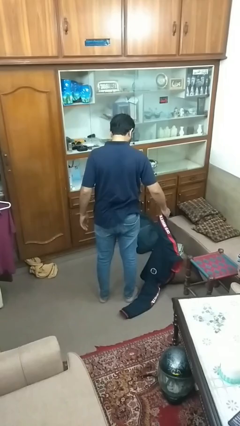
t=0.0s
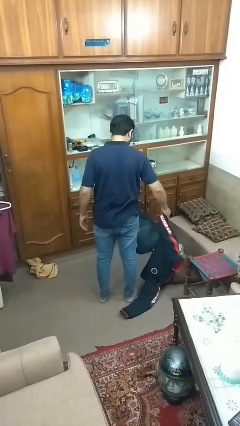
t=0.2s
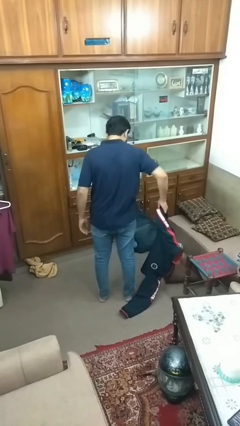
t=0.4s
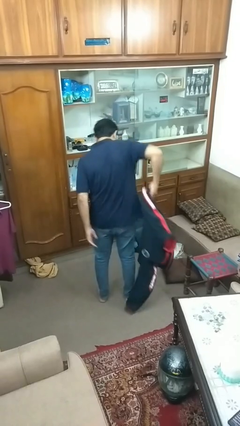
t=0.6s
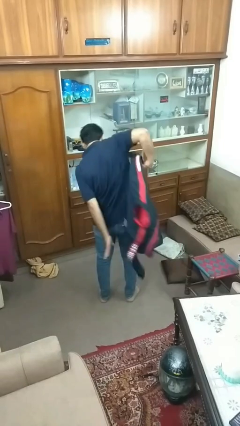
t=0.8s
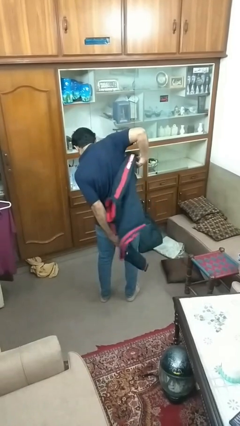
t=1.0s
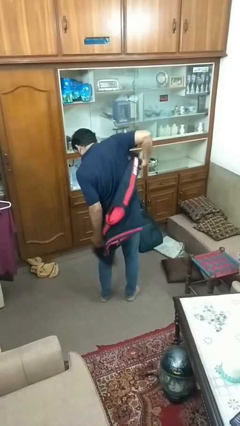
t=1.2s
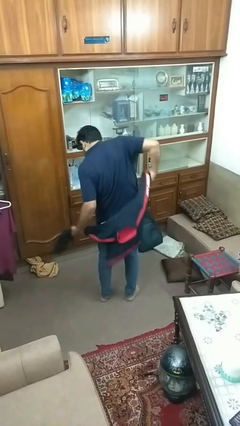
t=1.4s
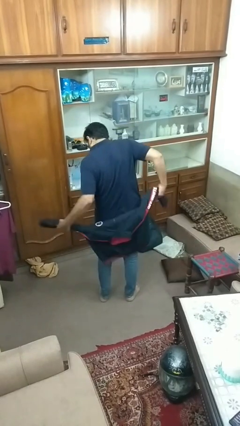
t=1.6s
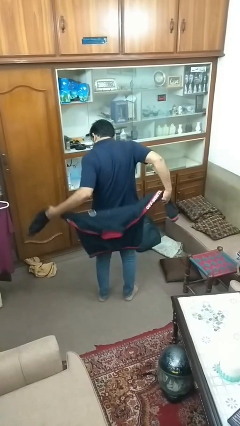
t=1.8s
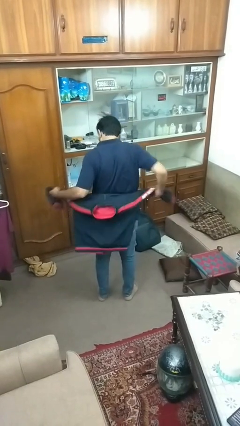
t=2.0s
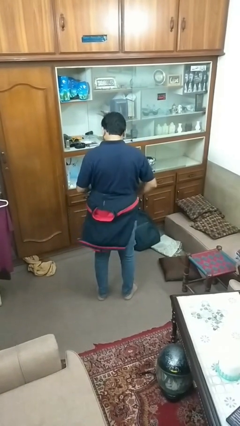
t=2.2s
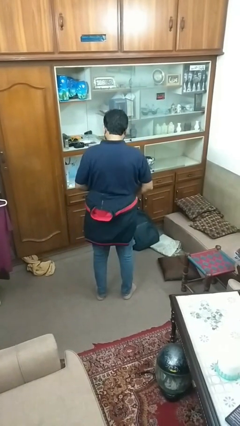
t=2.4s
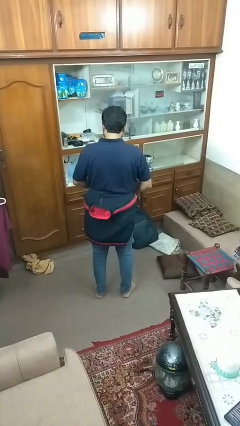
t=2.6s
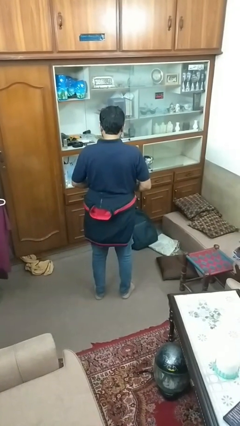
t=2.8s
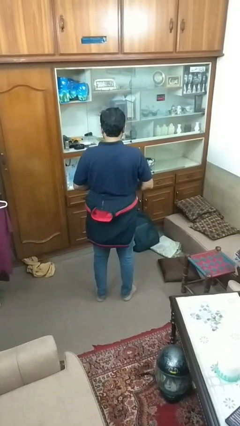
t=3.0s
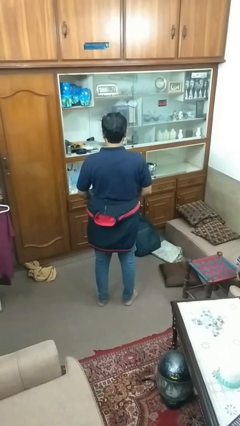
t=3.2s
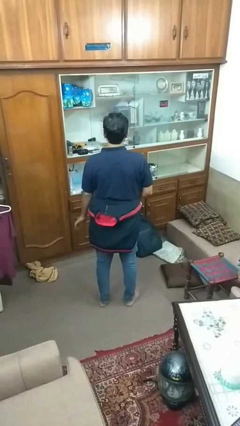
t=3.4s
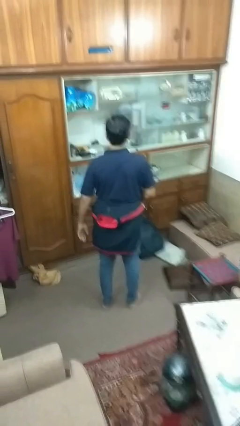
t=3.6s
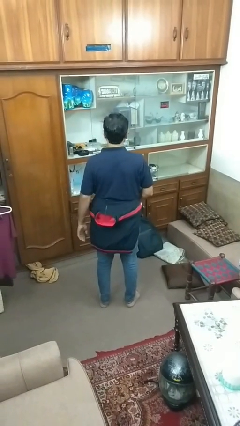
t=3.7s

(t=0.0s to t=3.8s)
person ties jacket around waist

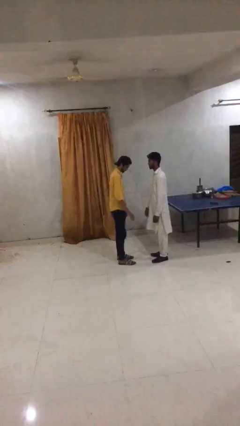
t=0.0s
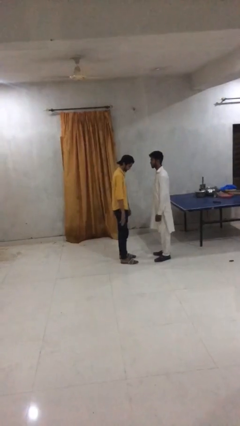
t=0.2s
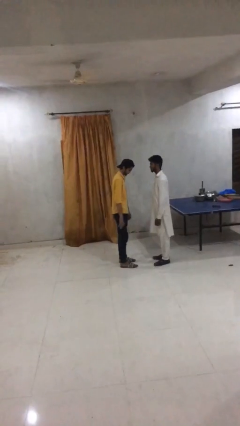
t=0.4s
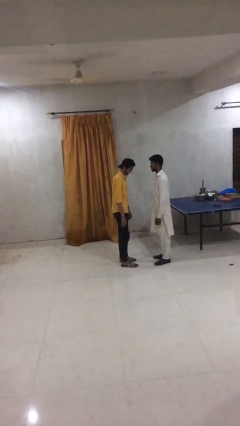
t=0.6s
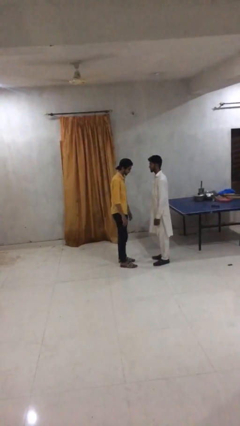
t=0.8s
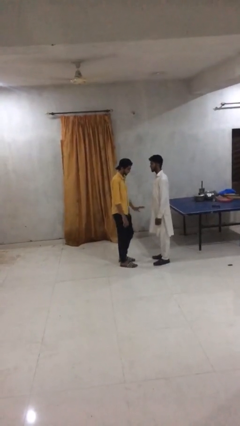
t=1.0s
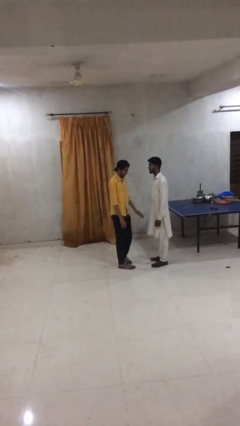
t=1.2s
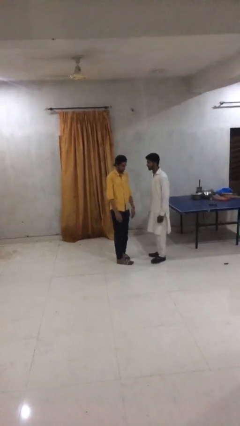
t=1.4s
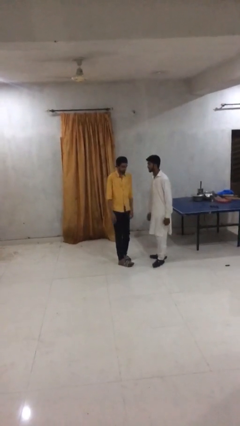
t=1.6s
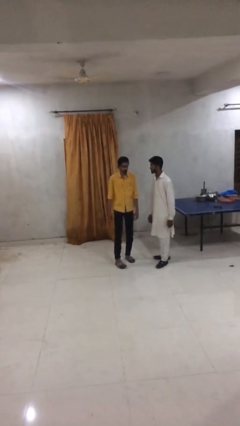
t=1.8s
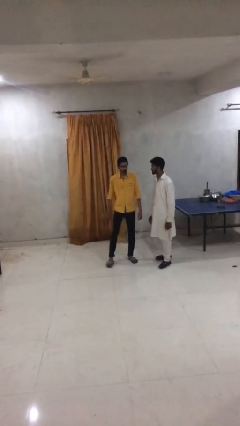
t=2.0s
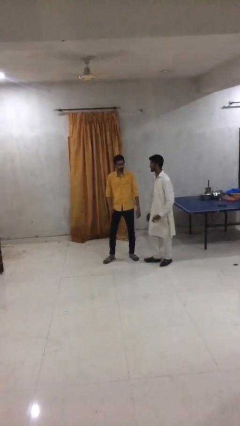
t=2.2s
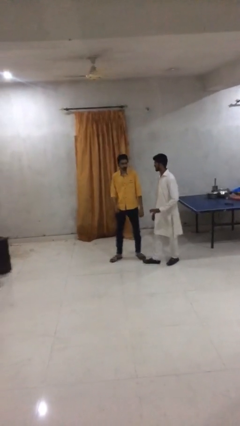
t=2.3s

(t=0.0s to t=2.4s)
person talks to person

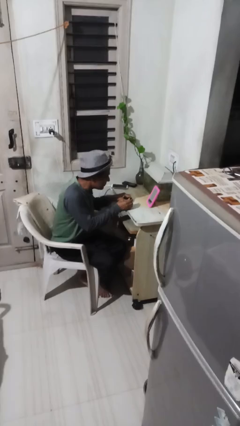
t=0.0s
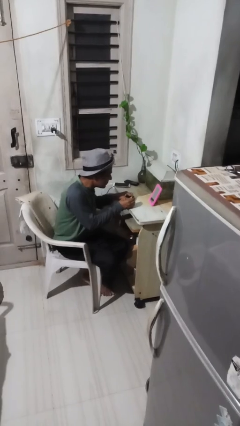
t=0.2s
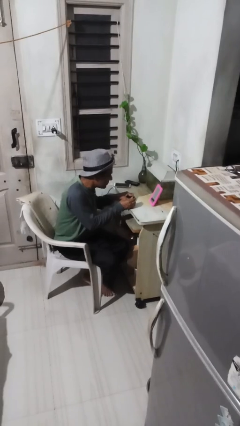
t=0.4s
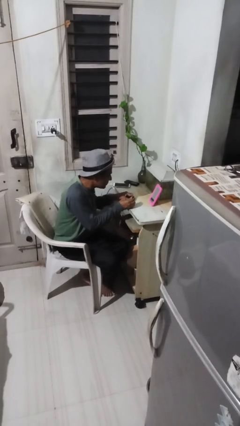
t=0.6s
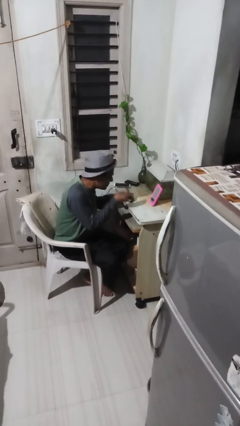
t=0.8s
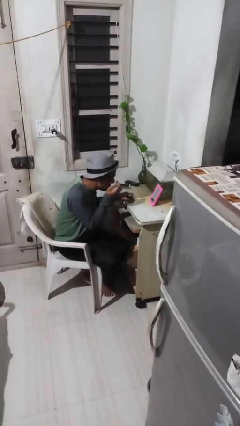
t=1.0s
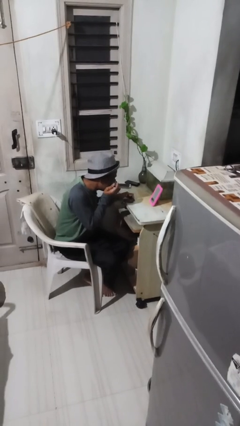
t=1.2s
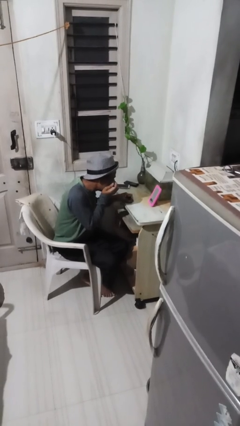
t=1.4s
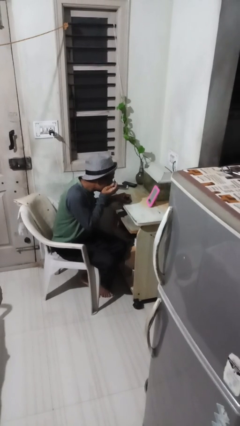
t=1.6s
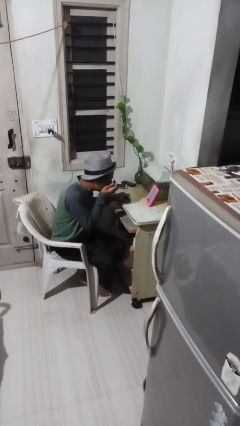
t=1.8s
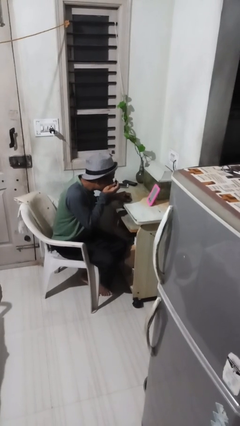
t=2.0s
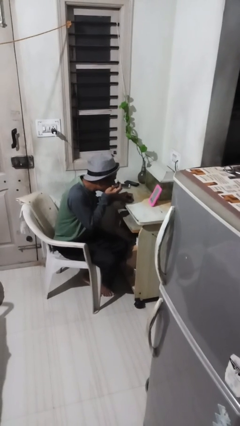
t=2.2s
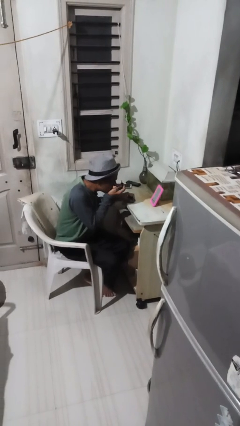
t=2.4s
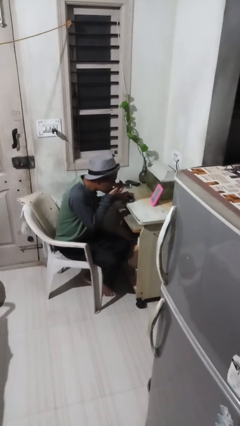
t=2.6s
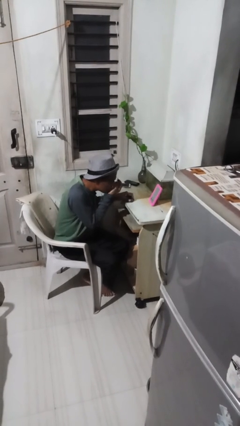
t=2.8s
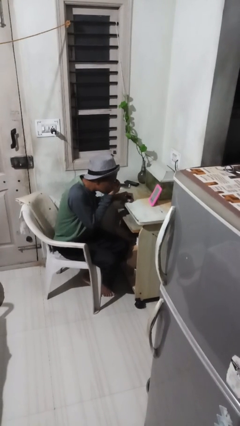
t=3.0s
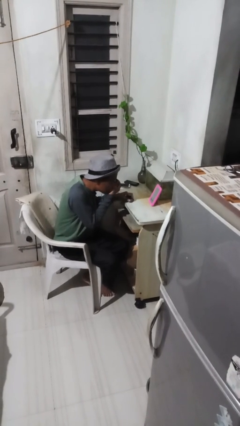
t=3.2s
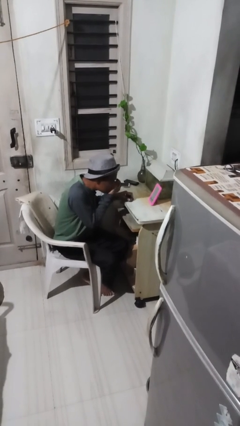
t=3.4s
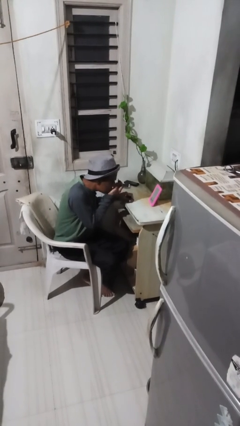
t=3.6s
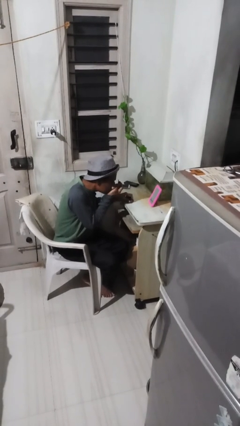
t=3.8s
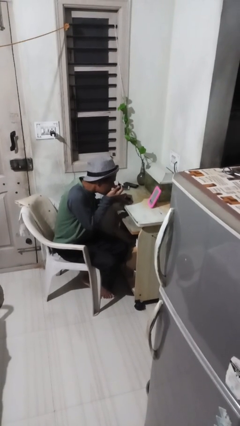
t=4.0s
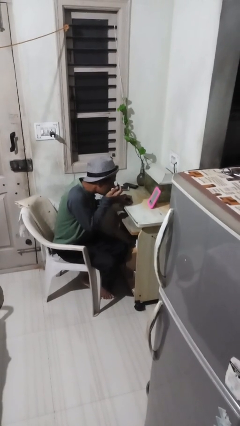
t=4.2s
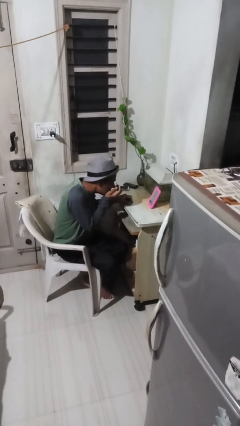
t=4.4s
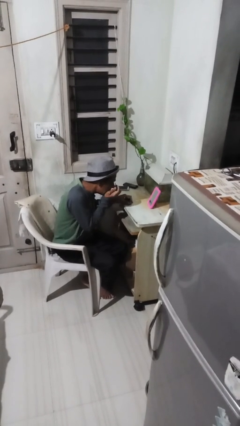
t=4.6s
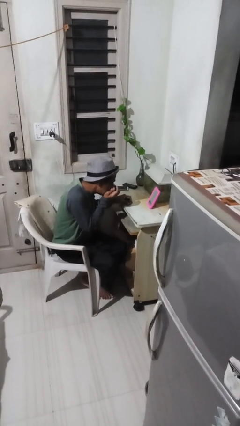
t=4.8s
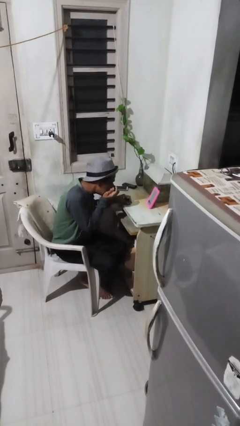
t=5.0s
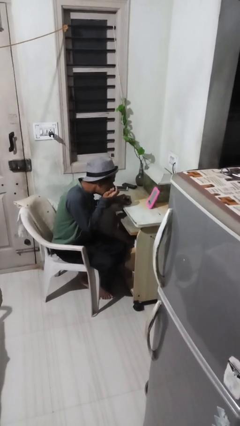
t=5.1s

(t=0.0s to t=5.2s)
person applies eye makeup

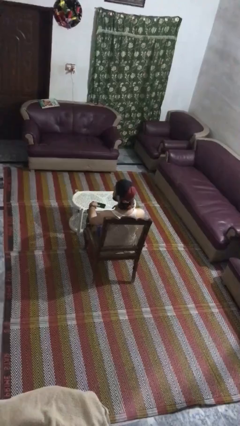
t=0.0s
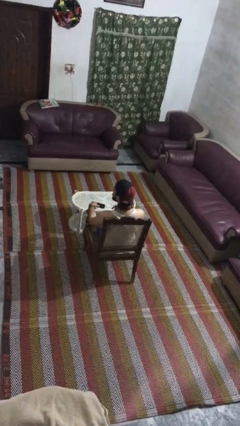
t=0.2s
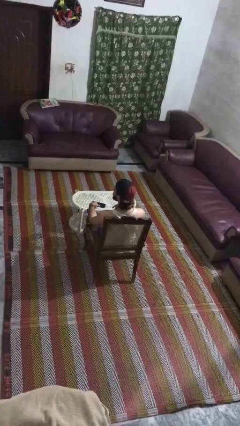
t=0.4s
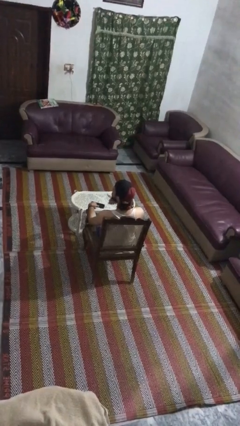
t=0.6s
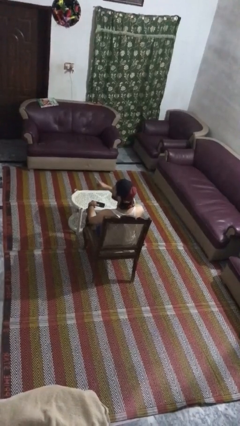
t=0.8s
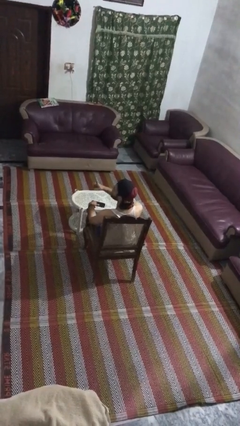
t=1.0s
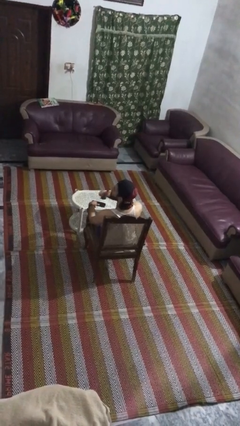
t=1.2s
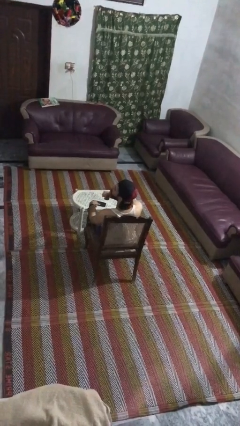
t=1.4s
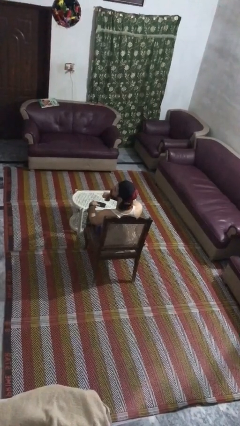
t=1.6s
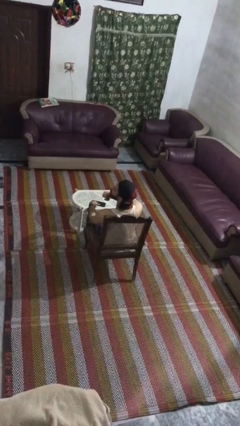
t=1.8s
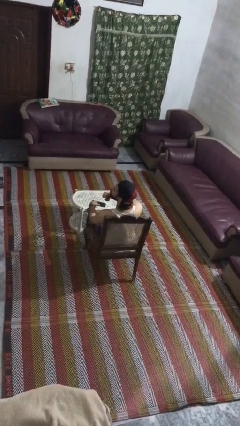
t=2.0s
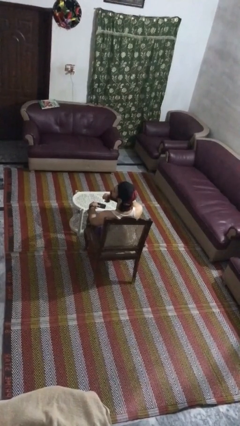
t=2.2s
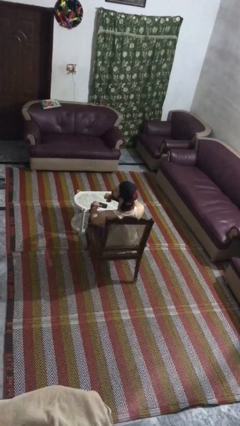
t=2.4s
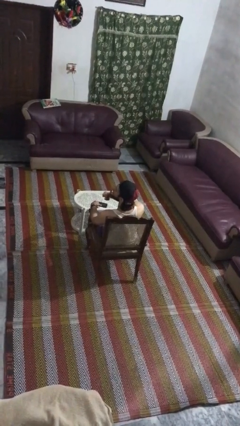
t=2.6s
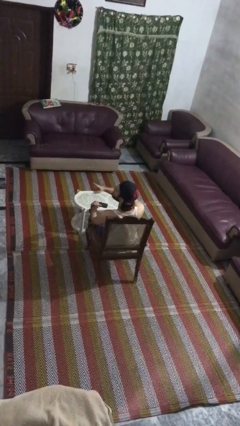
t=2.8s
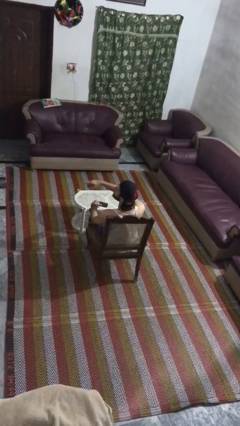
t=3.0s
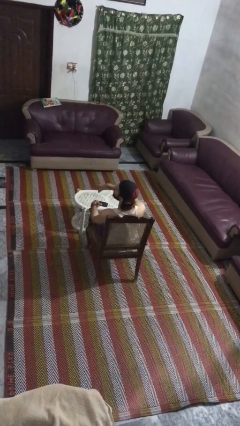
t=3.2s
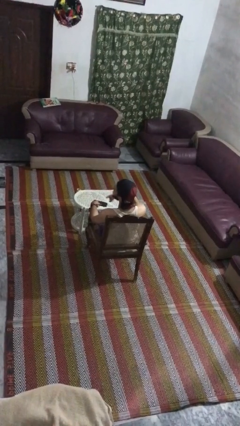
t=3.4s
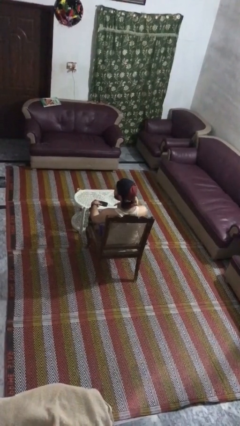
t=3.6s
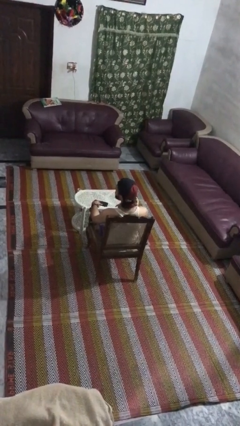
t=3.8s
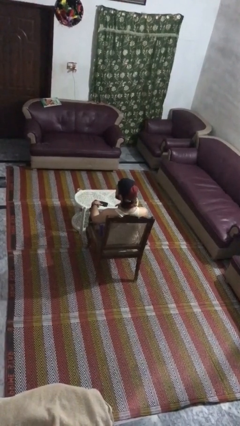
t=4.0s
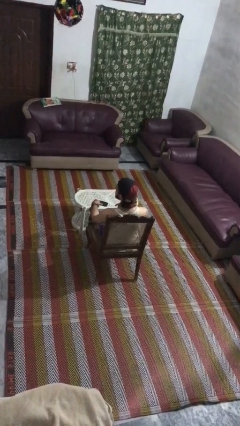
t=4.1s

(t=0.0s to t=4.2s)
person gestures be quiet

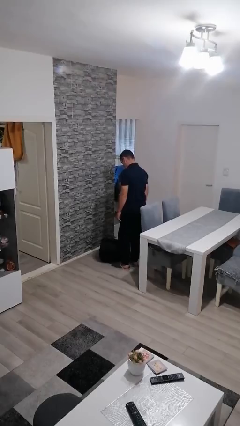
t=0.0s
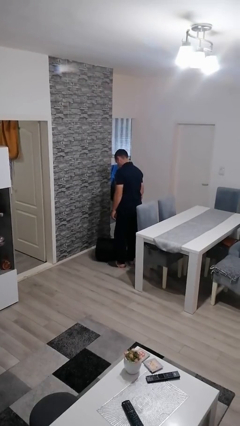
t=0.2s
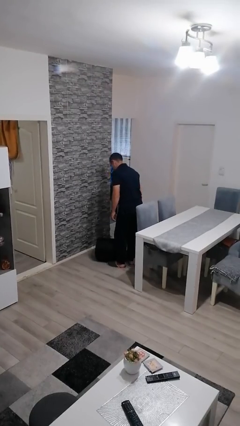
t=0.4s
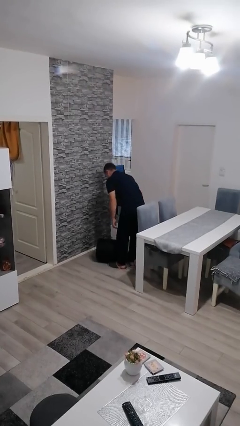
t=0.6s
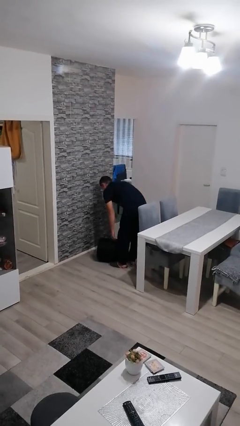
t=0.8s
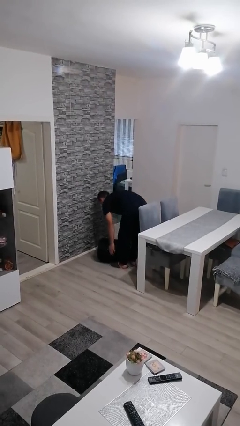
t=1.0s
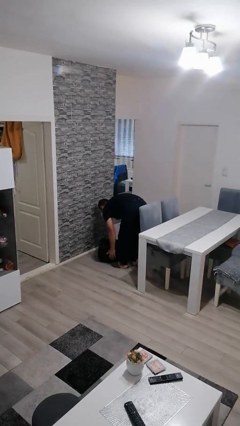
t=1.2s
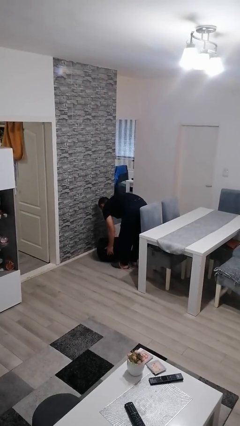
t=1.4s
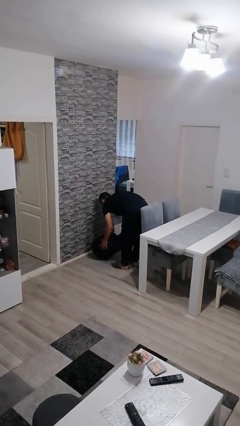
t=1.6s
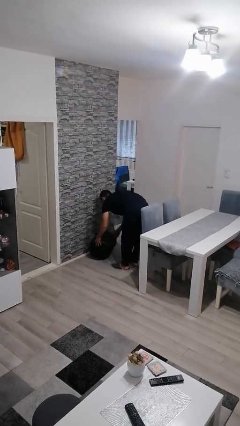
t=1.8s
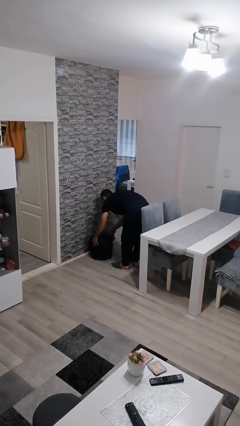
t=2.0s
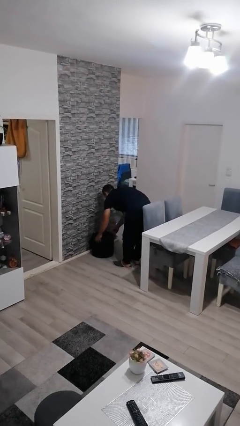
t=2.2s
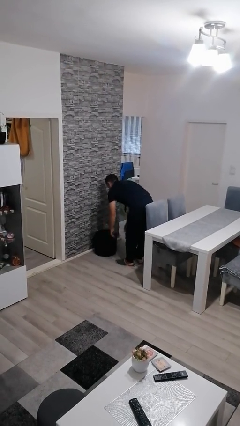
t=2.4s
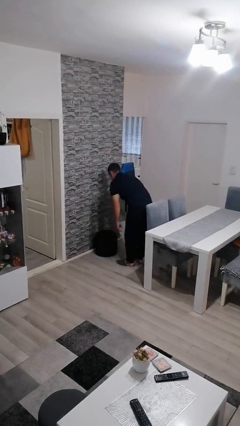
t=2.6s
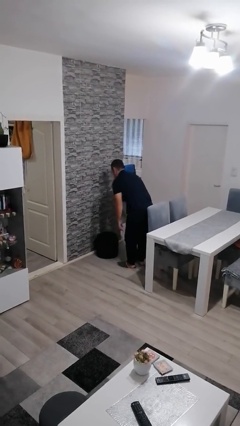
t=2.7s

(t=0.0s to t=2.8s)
person sets upright furniture
